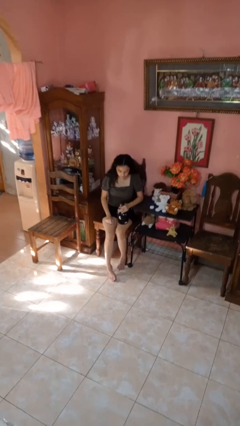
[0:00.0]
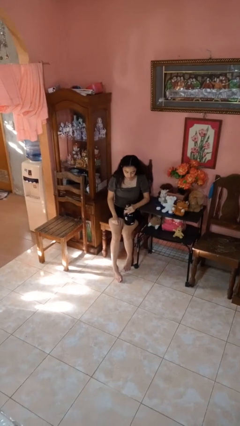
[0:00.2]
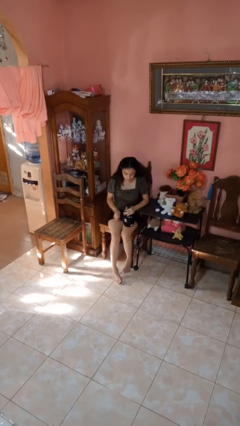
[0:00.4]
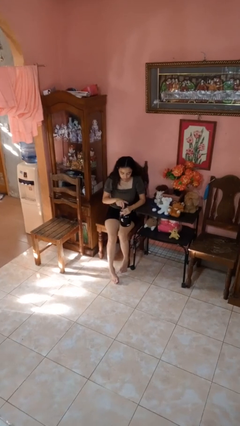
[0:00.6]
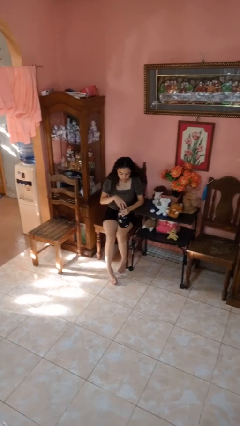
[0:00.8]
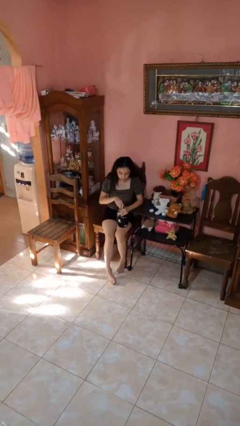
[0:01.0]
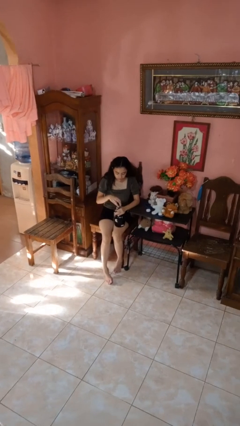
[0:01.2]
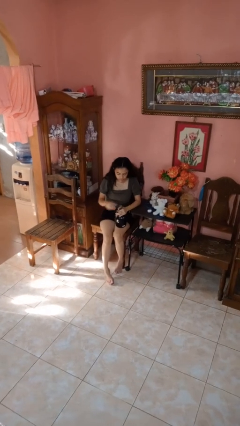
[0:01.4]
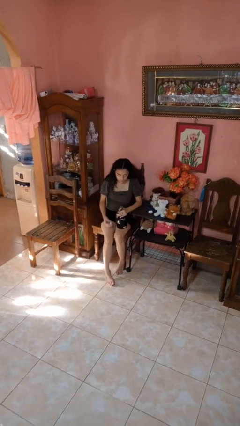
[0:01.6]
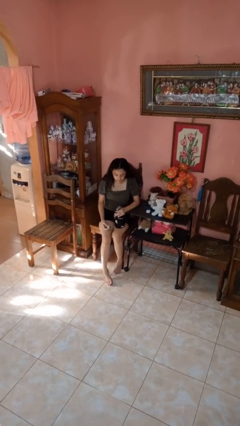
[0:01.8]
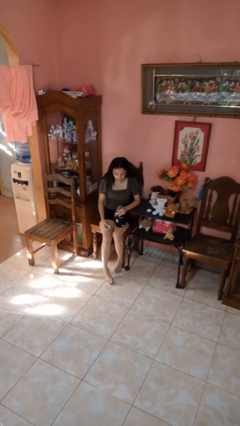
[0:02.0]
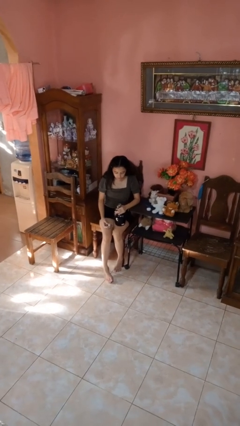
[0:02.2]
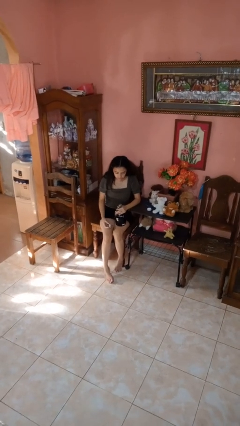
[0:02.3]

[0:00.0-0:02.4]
person unscrews lid from bottle

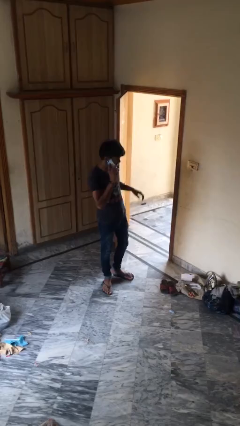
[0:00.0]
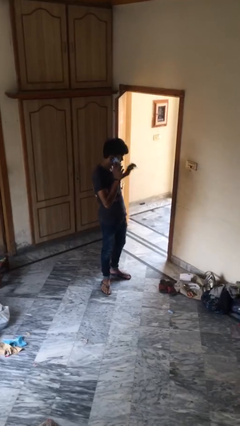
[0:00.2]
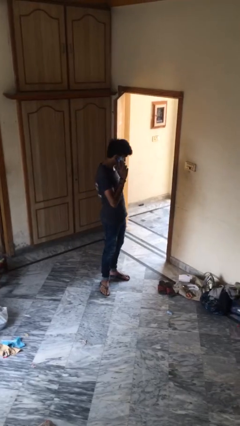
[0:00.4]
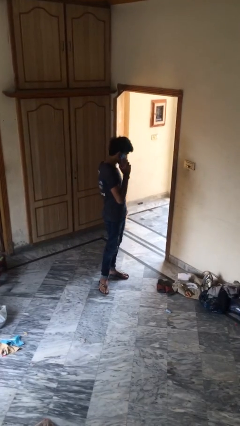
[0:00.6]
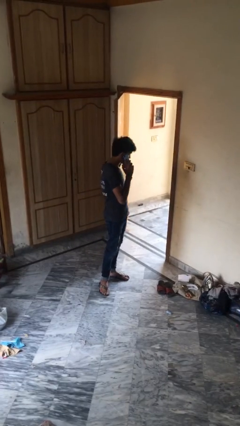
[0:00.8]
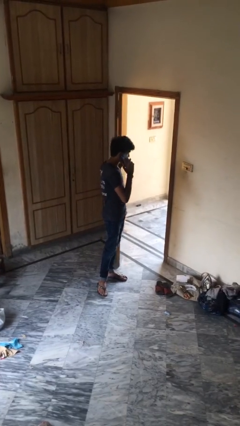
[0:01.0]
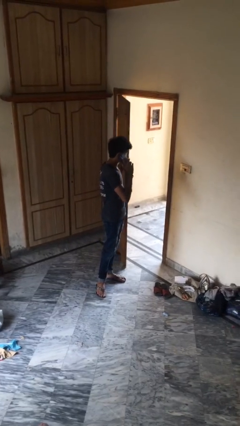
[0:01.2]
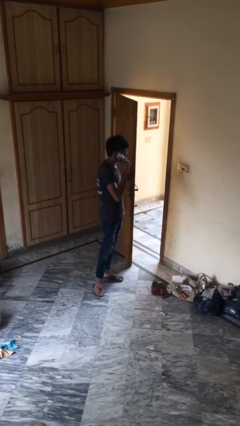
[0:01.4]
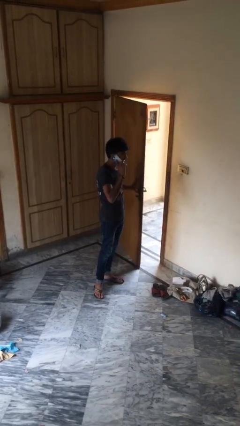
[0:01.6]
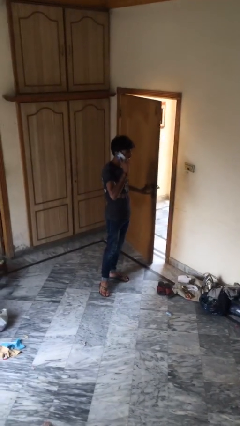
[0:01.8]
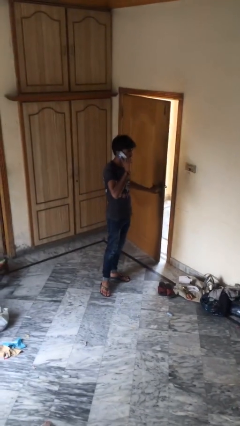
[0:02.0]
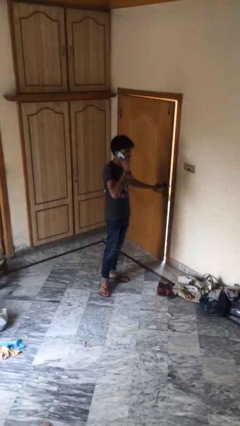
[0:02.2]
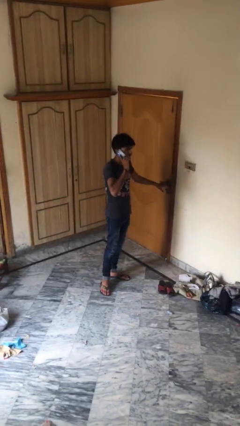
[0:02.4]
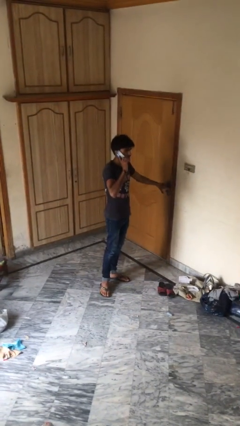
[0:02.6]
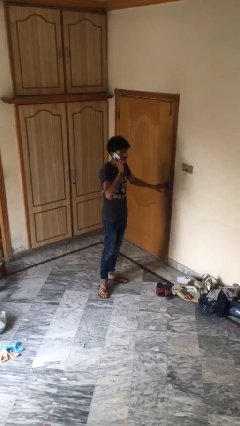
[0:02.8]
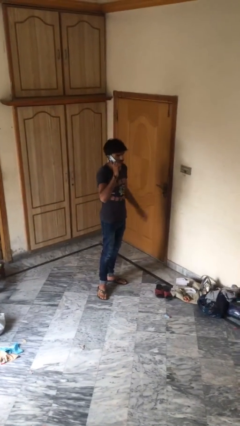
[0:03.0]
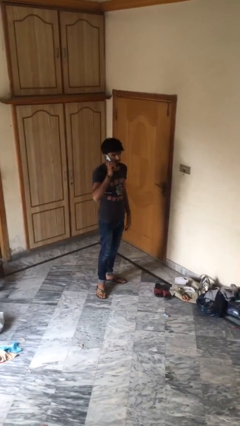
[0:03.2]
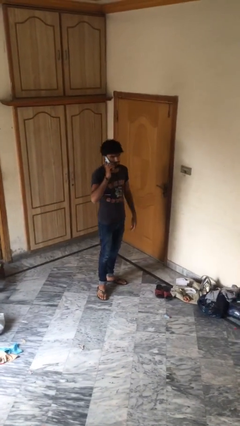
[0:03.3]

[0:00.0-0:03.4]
person closes facility door

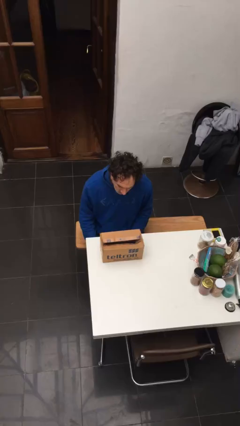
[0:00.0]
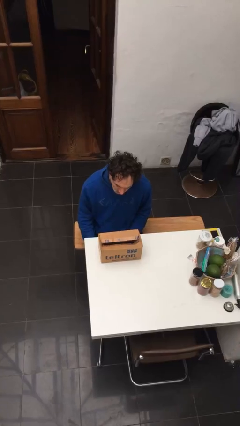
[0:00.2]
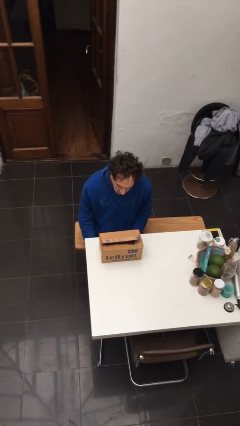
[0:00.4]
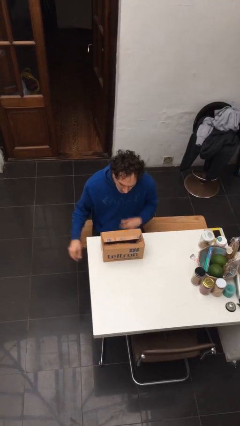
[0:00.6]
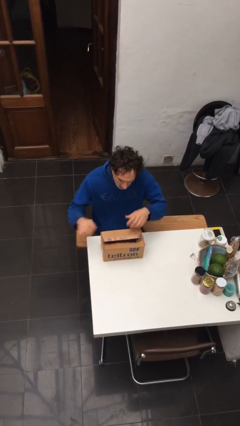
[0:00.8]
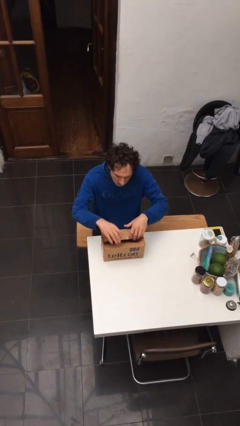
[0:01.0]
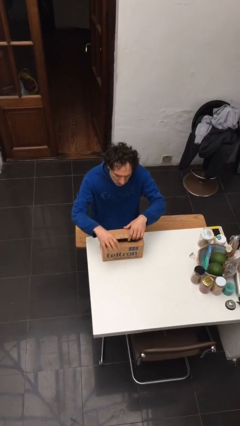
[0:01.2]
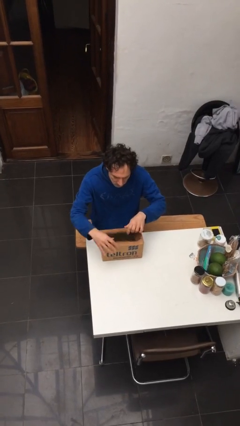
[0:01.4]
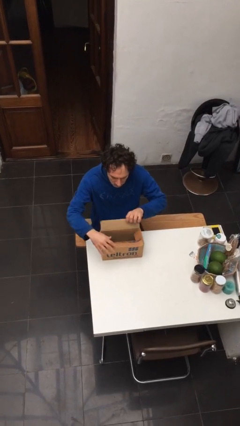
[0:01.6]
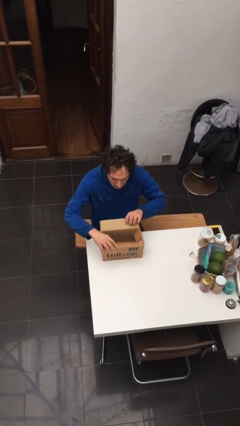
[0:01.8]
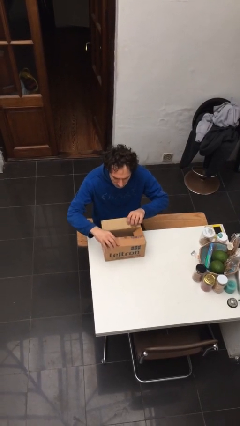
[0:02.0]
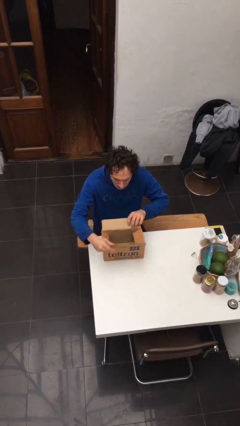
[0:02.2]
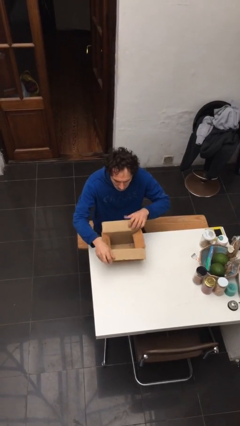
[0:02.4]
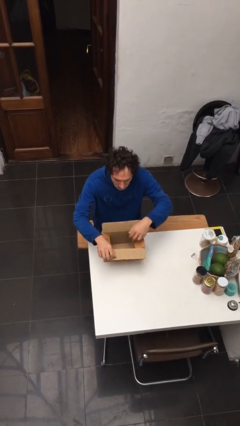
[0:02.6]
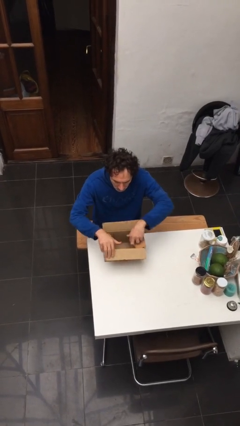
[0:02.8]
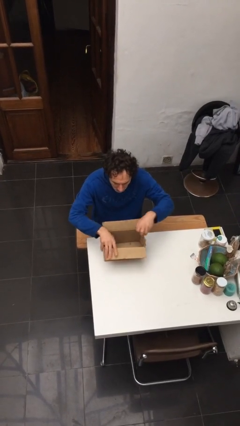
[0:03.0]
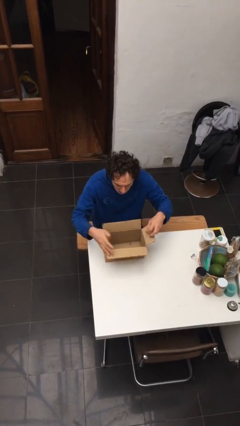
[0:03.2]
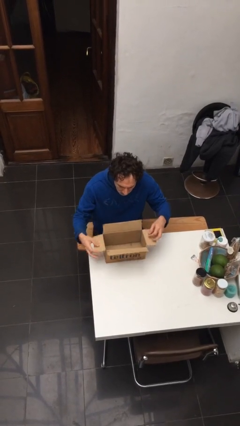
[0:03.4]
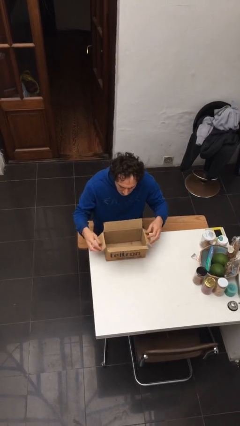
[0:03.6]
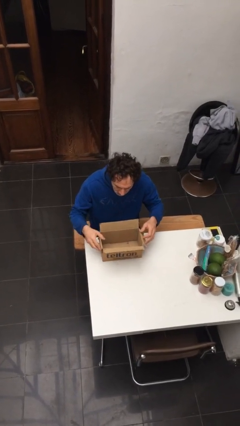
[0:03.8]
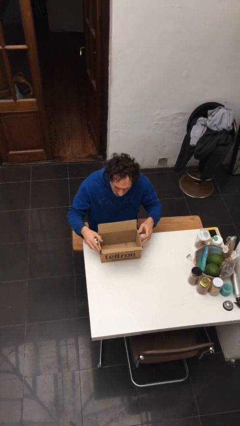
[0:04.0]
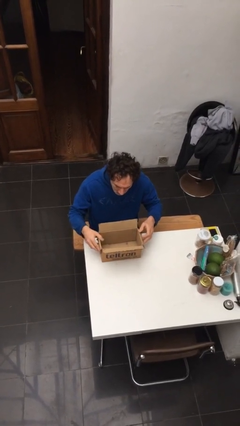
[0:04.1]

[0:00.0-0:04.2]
person opens box

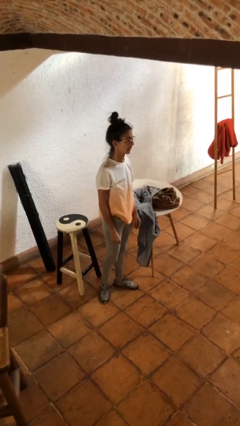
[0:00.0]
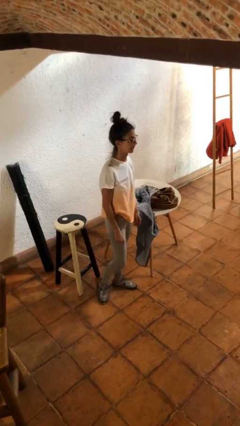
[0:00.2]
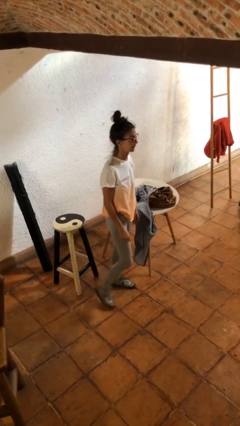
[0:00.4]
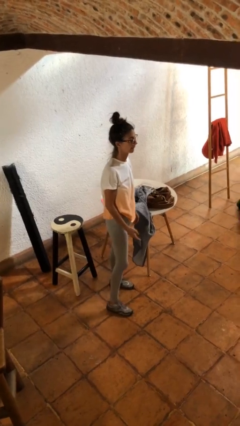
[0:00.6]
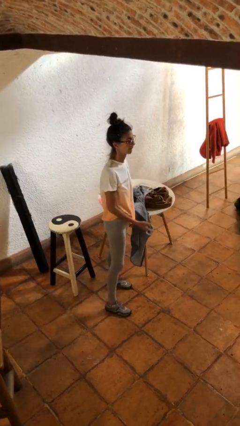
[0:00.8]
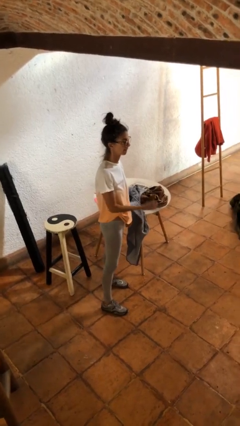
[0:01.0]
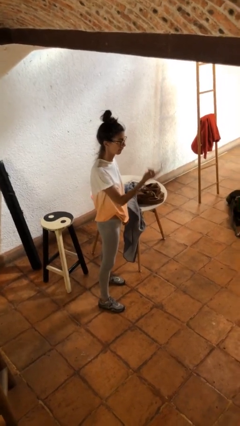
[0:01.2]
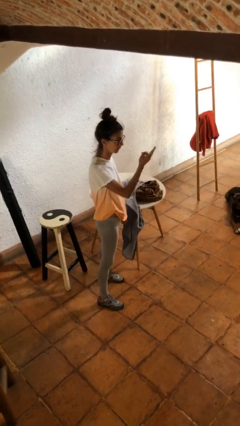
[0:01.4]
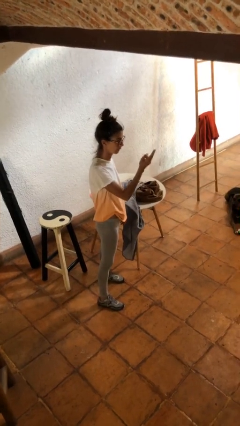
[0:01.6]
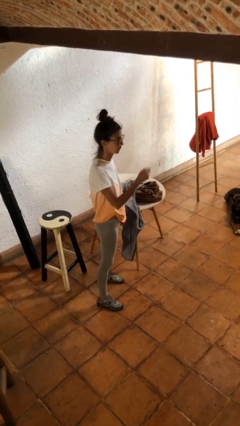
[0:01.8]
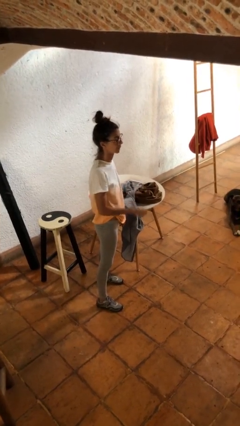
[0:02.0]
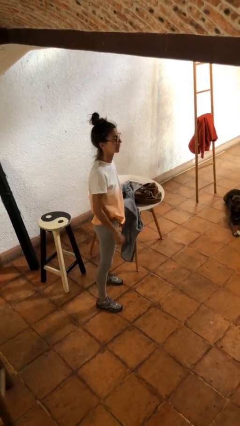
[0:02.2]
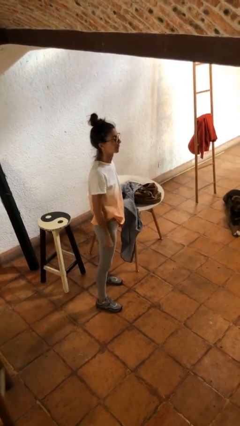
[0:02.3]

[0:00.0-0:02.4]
person gestures swipe up

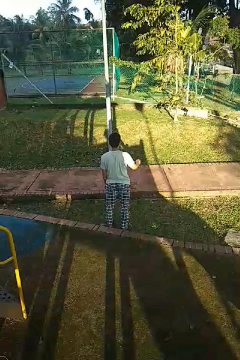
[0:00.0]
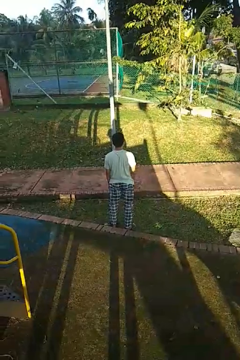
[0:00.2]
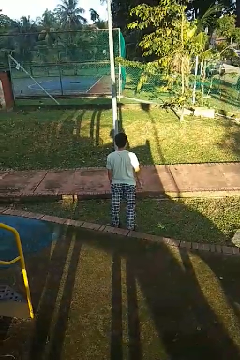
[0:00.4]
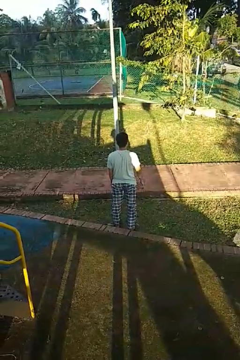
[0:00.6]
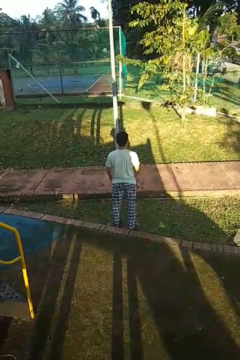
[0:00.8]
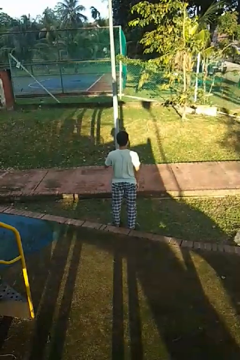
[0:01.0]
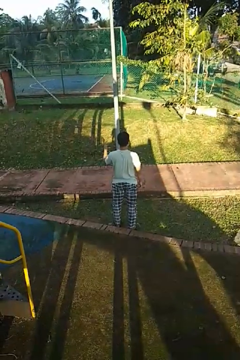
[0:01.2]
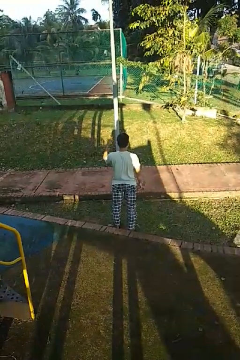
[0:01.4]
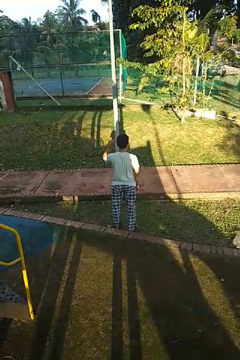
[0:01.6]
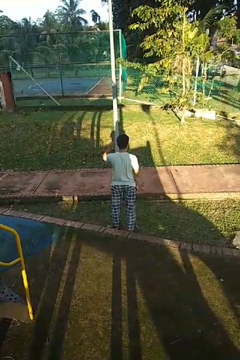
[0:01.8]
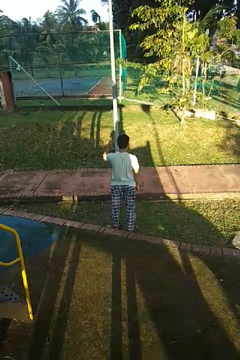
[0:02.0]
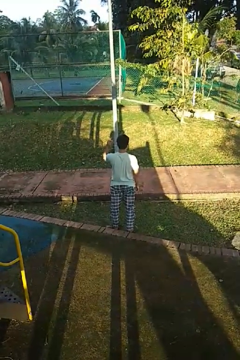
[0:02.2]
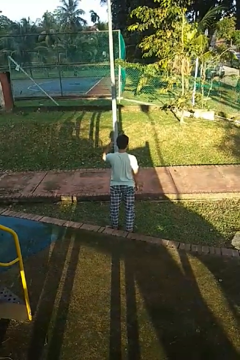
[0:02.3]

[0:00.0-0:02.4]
person gestures listen closely

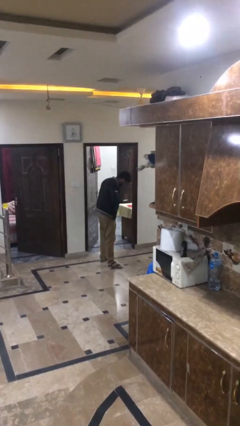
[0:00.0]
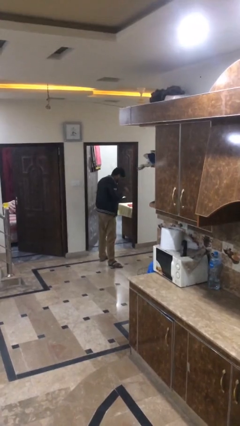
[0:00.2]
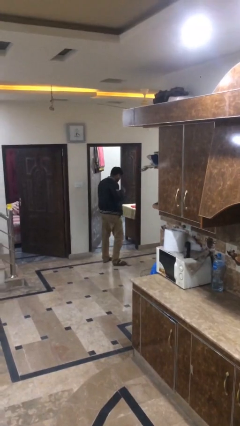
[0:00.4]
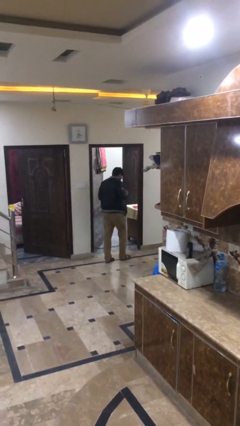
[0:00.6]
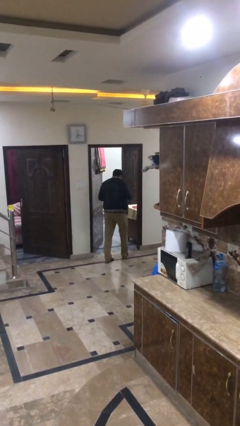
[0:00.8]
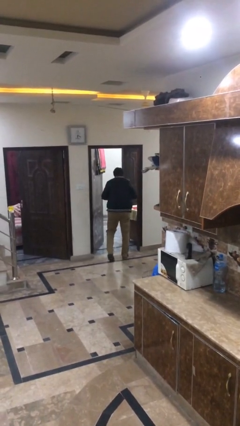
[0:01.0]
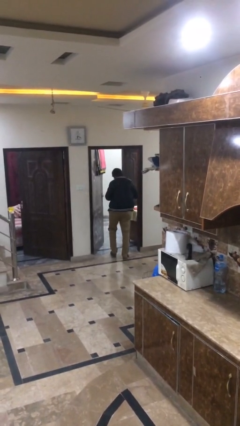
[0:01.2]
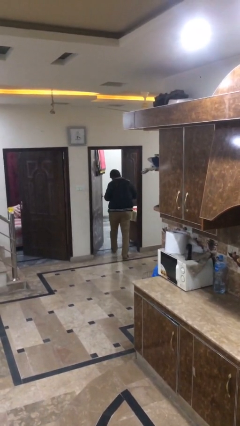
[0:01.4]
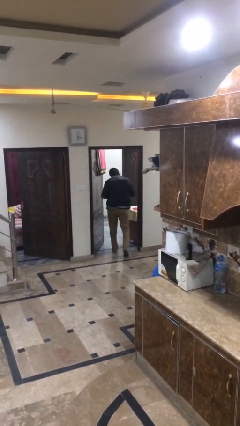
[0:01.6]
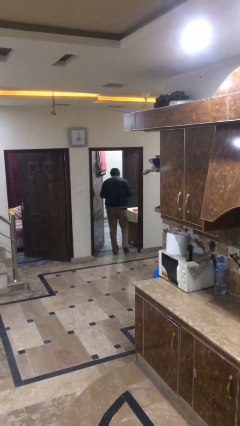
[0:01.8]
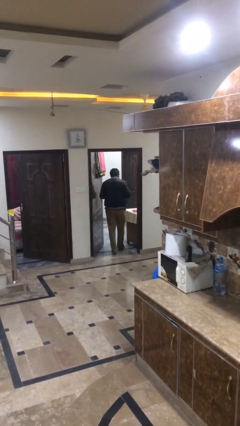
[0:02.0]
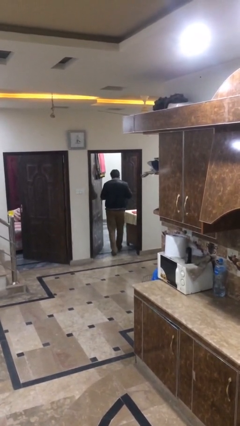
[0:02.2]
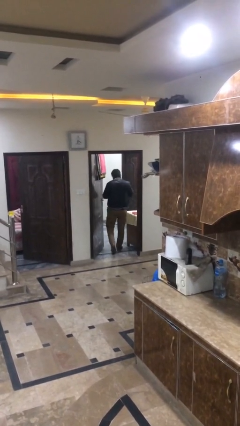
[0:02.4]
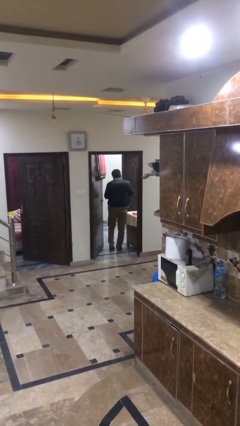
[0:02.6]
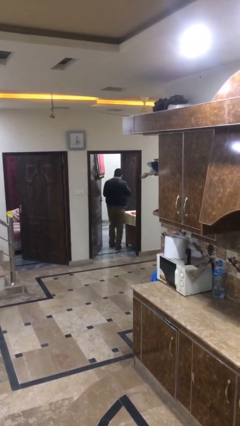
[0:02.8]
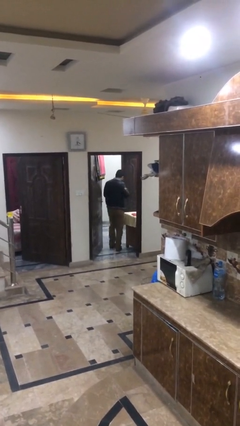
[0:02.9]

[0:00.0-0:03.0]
person enters scene through structure
